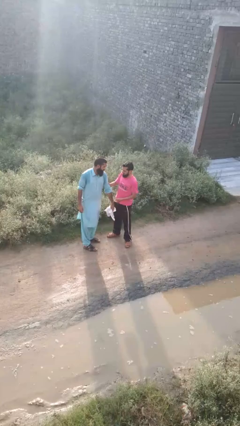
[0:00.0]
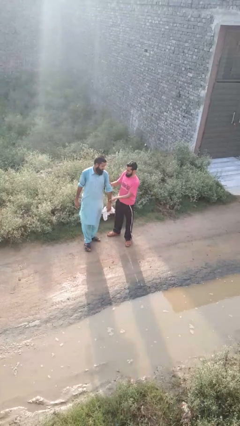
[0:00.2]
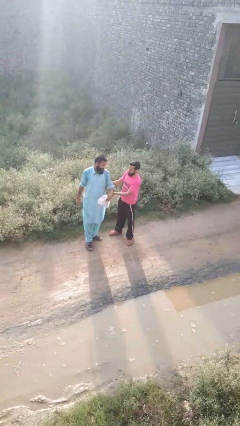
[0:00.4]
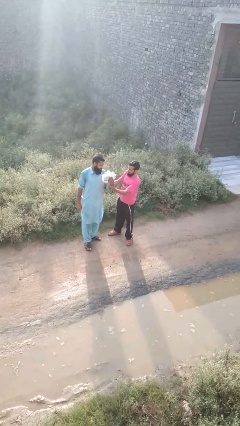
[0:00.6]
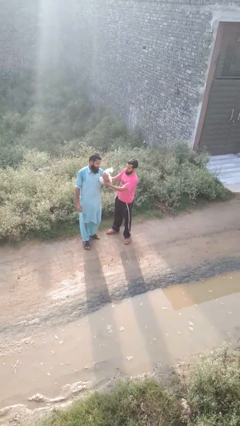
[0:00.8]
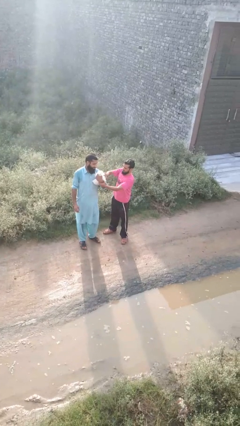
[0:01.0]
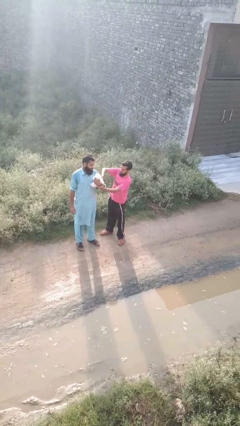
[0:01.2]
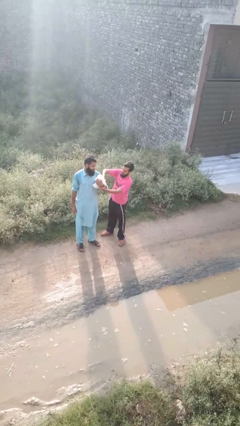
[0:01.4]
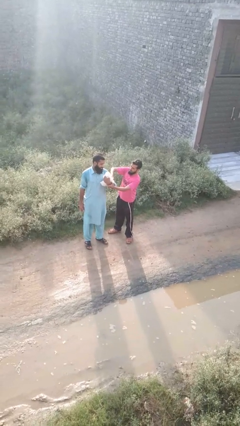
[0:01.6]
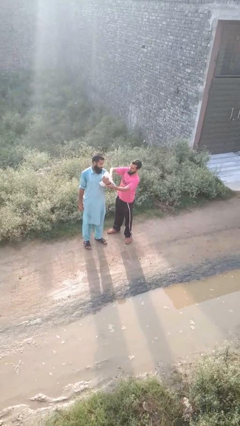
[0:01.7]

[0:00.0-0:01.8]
person grabs person by bicep

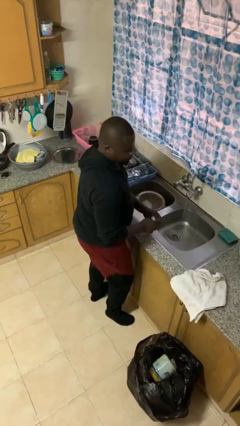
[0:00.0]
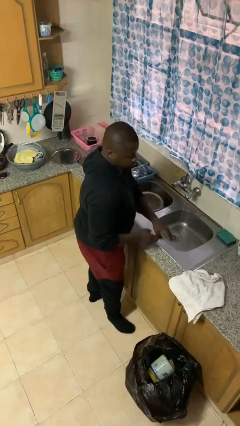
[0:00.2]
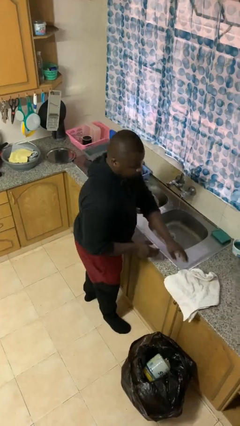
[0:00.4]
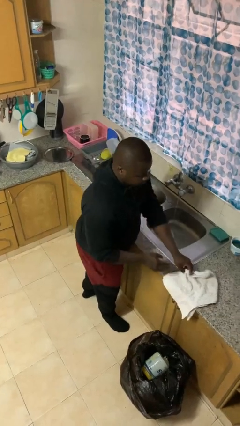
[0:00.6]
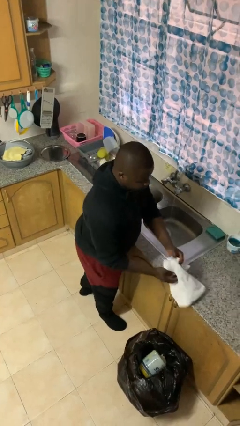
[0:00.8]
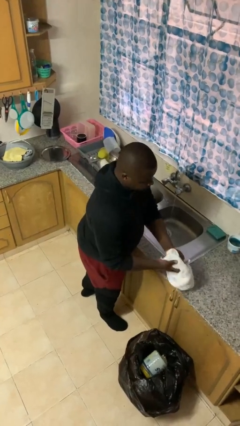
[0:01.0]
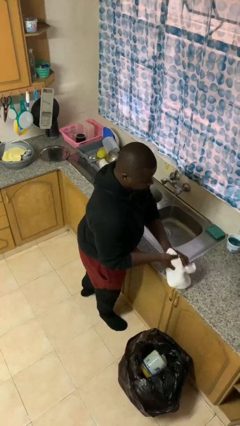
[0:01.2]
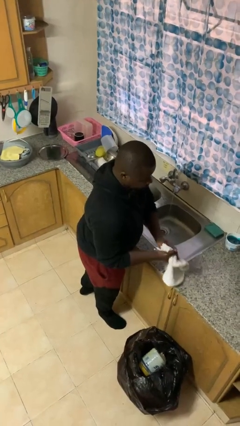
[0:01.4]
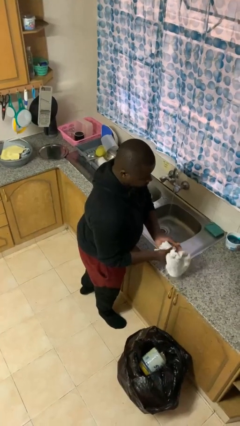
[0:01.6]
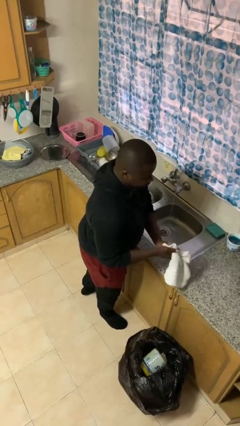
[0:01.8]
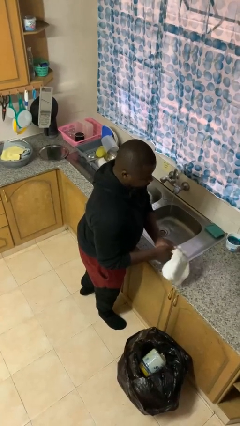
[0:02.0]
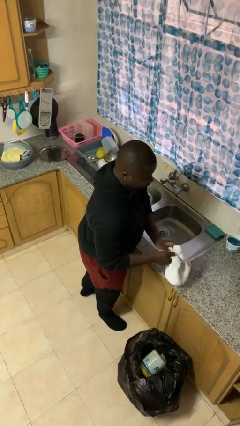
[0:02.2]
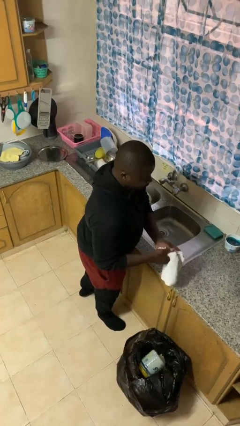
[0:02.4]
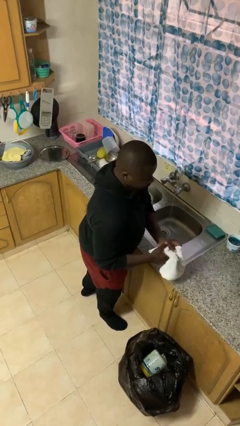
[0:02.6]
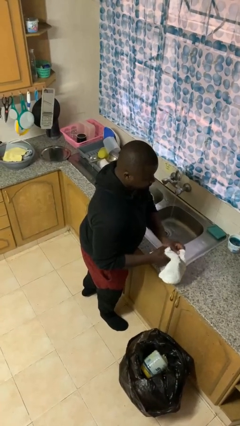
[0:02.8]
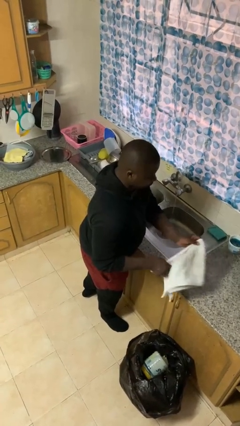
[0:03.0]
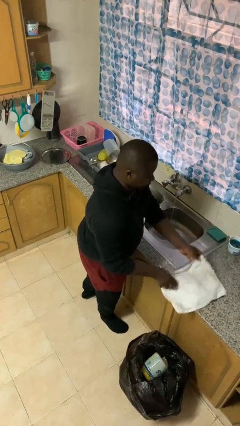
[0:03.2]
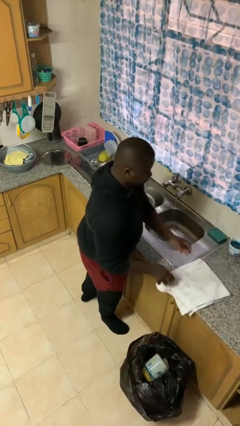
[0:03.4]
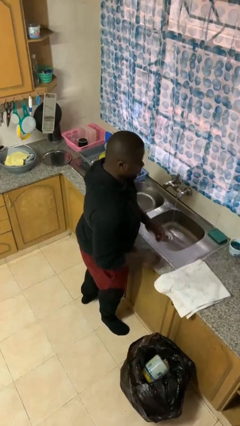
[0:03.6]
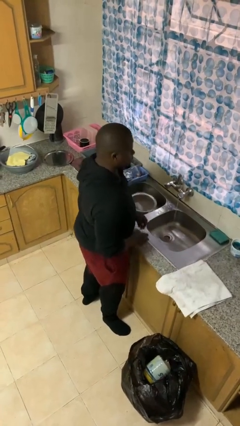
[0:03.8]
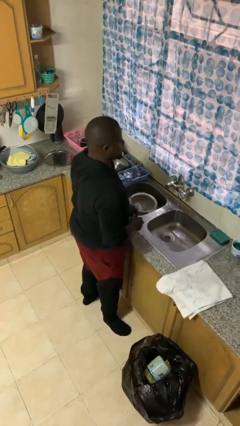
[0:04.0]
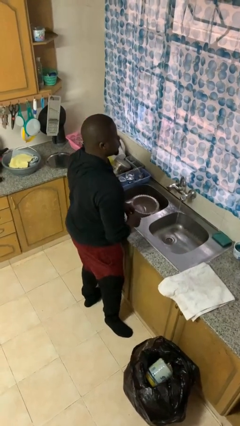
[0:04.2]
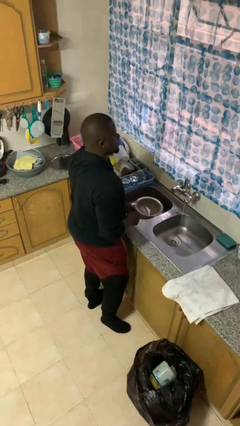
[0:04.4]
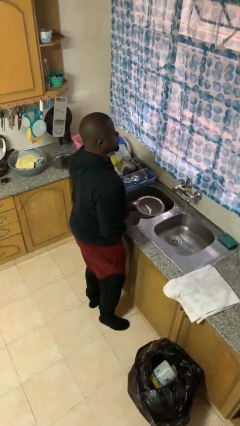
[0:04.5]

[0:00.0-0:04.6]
person dries hands with towel

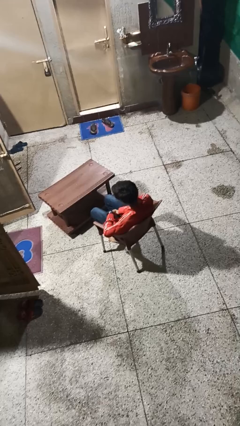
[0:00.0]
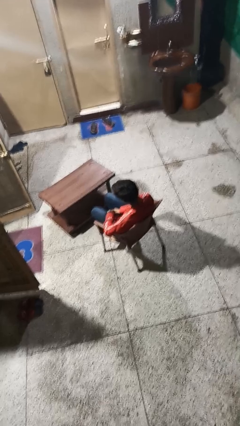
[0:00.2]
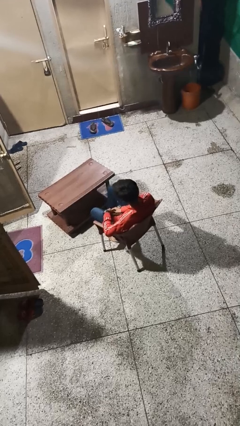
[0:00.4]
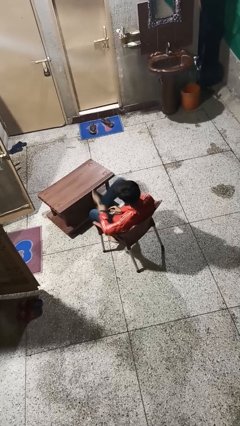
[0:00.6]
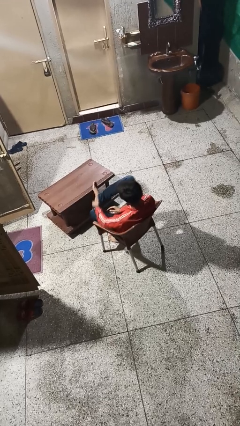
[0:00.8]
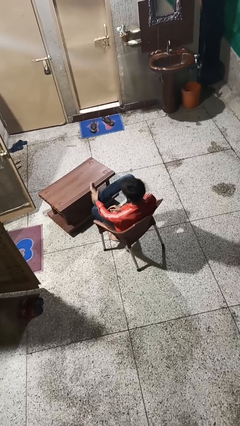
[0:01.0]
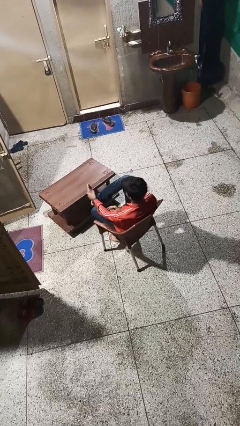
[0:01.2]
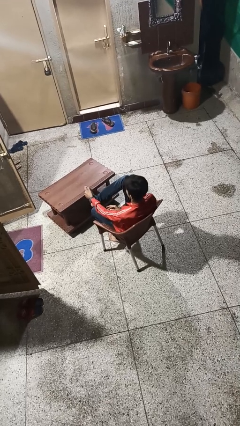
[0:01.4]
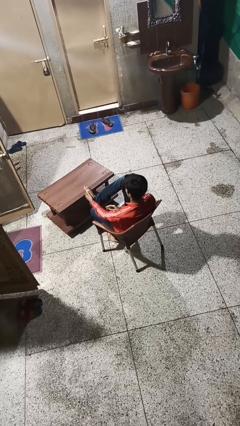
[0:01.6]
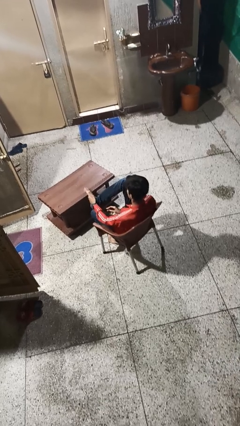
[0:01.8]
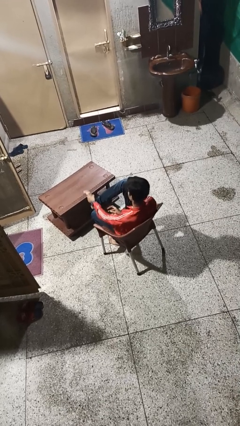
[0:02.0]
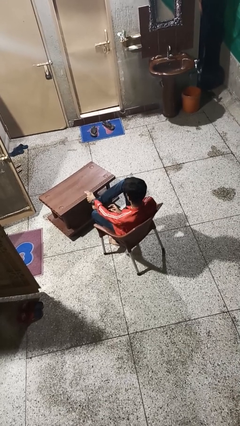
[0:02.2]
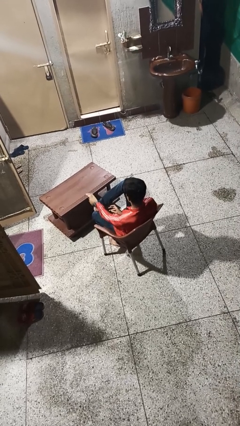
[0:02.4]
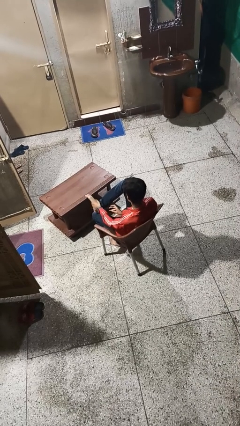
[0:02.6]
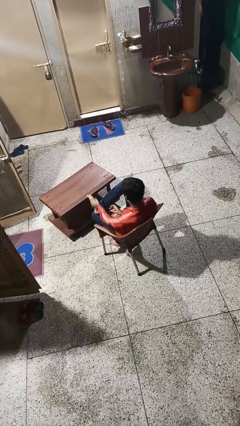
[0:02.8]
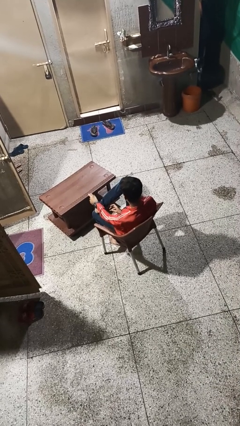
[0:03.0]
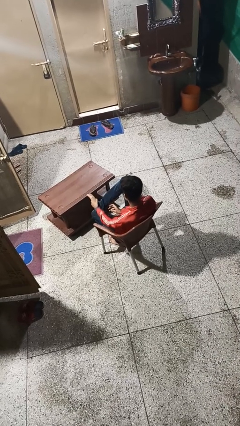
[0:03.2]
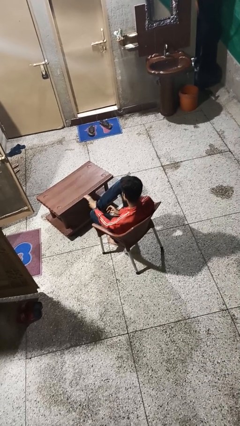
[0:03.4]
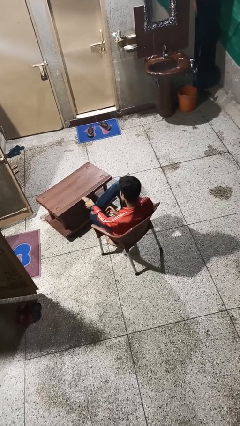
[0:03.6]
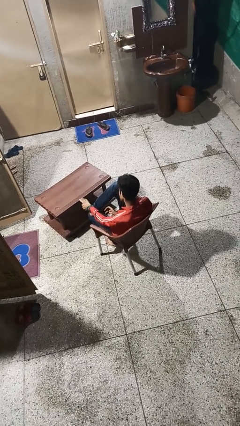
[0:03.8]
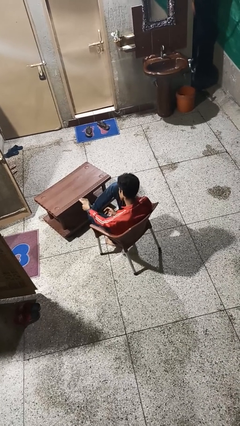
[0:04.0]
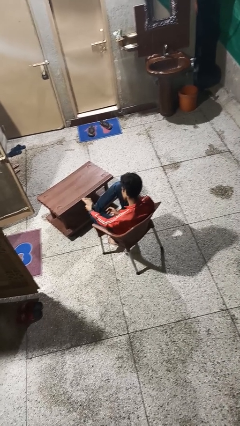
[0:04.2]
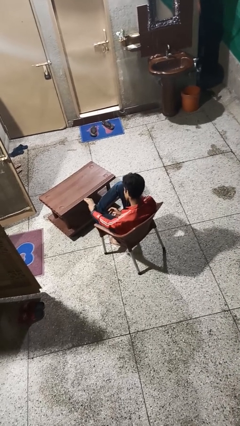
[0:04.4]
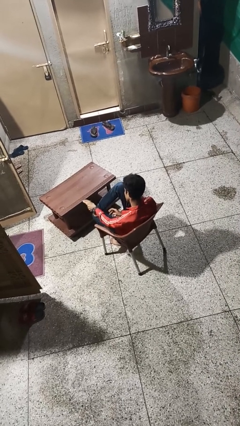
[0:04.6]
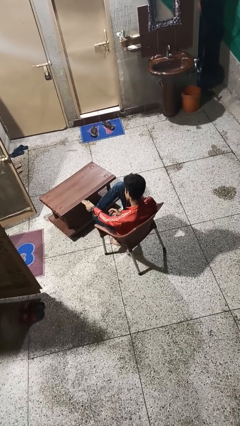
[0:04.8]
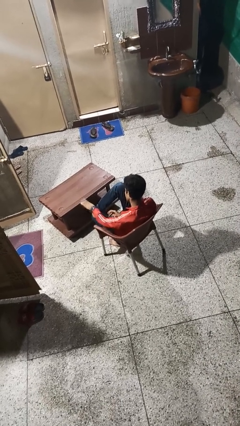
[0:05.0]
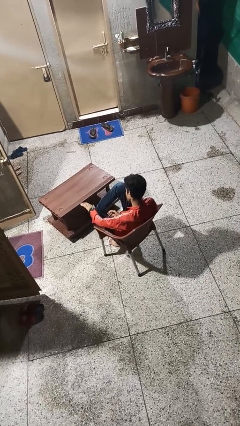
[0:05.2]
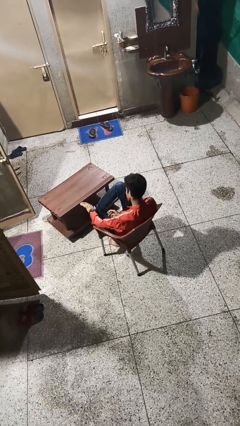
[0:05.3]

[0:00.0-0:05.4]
person rubs foot

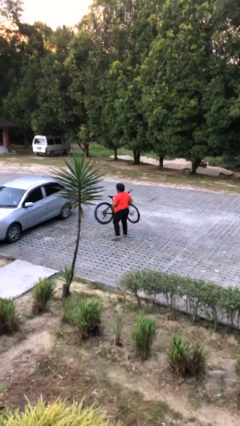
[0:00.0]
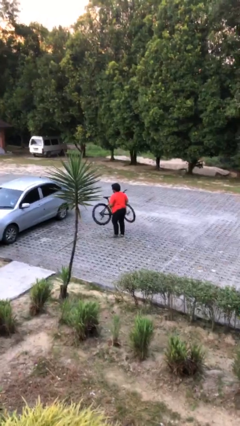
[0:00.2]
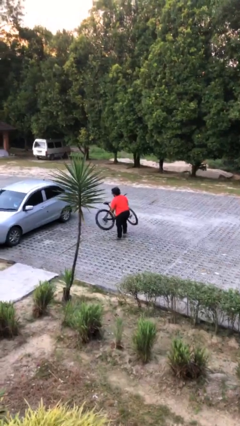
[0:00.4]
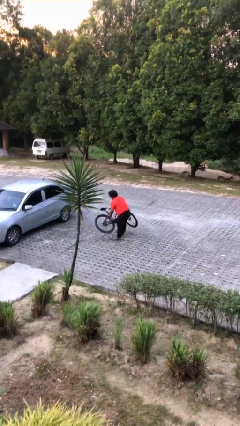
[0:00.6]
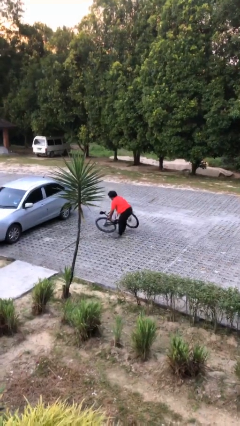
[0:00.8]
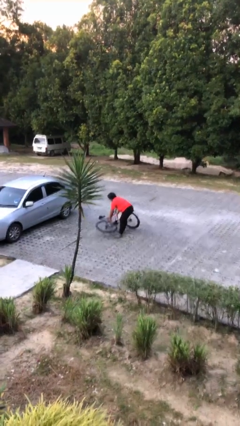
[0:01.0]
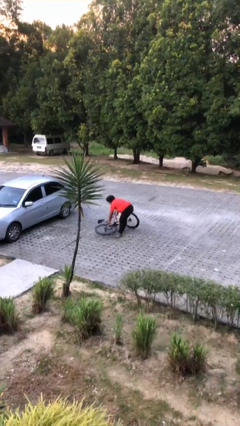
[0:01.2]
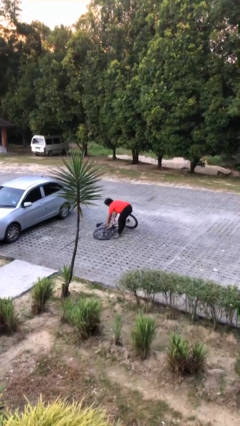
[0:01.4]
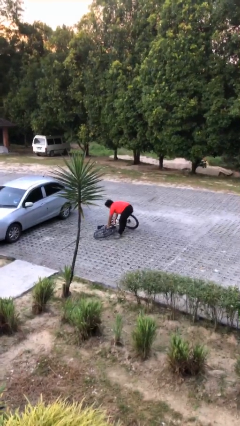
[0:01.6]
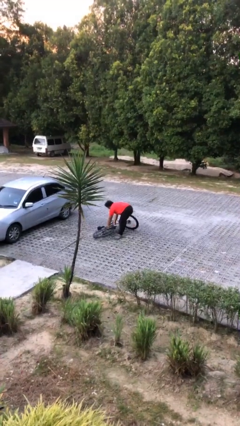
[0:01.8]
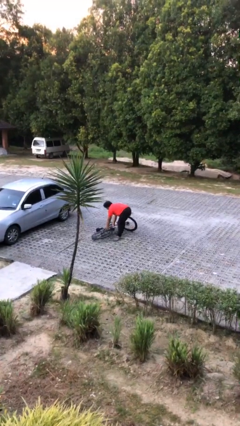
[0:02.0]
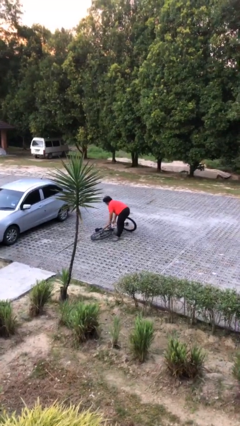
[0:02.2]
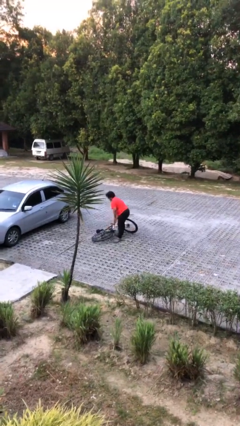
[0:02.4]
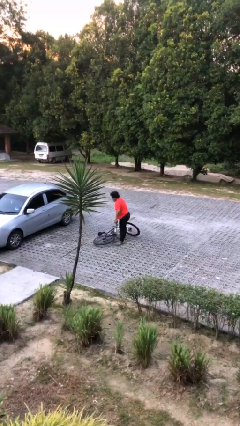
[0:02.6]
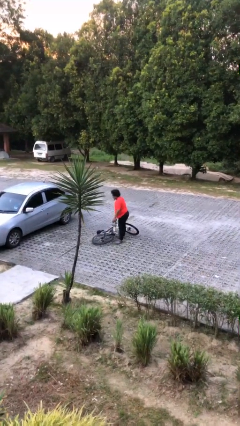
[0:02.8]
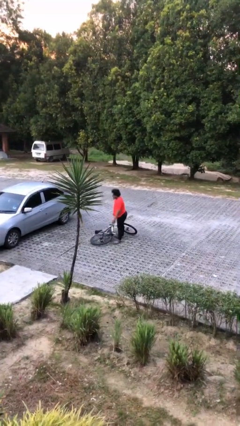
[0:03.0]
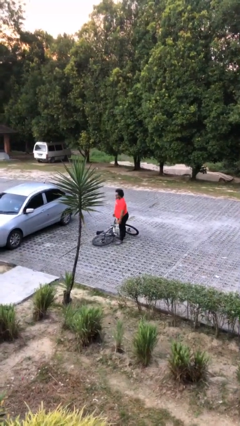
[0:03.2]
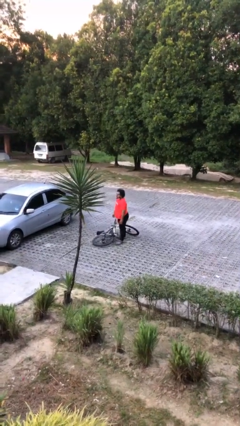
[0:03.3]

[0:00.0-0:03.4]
person puts down object on floor

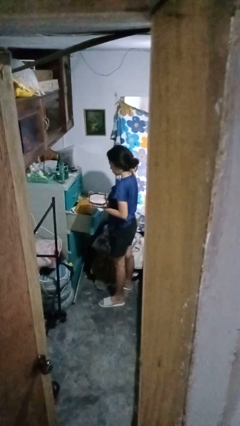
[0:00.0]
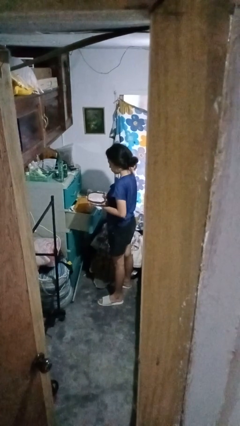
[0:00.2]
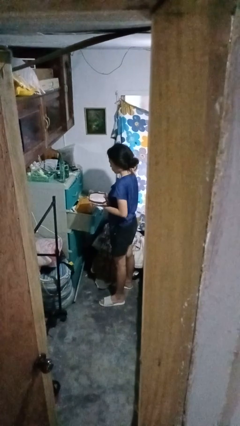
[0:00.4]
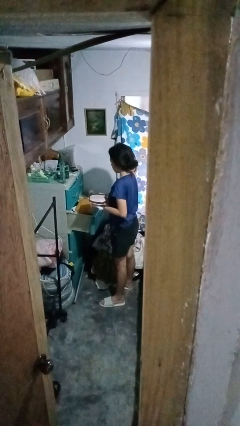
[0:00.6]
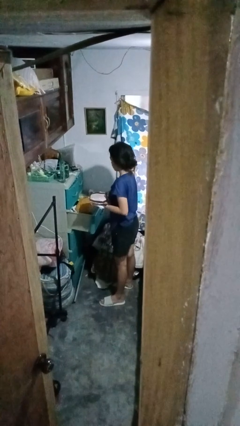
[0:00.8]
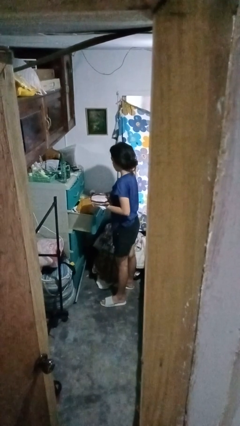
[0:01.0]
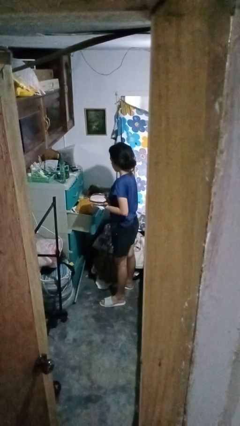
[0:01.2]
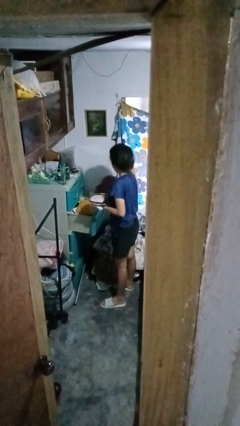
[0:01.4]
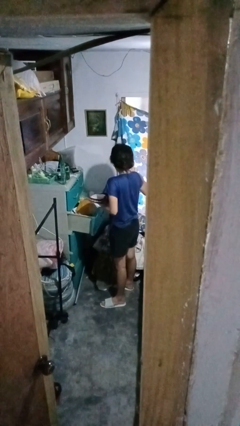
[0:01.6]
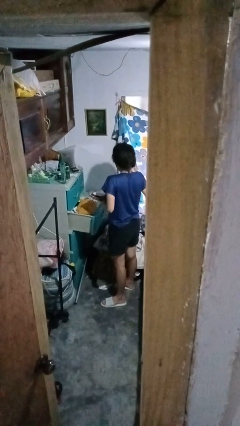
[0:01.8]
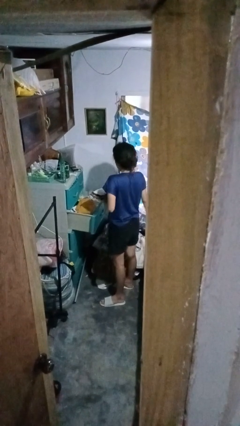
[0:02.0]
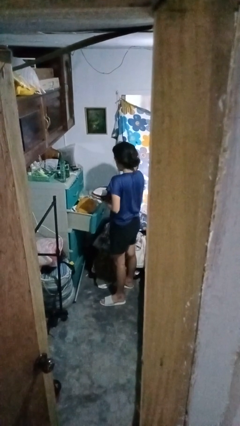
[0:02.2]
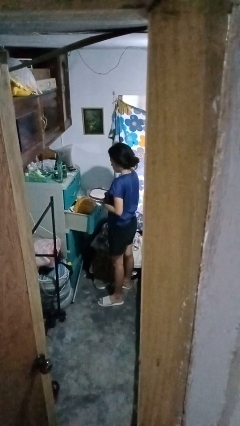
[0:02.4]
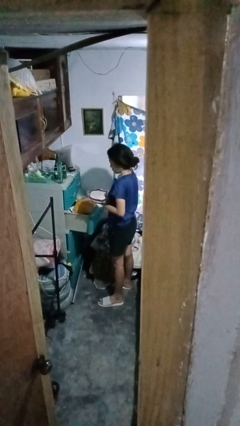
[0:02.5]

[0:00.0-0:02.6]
person takes clothes from dresser
